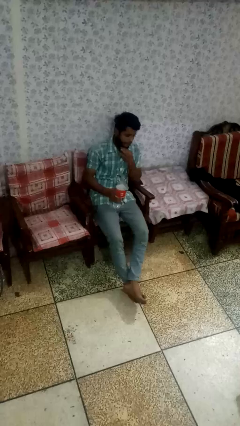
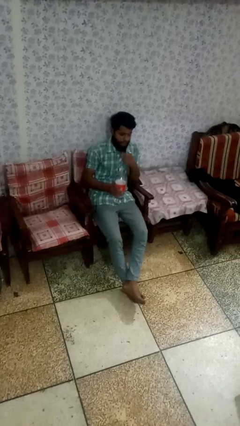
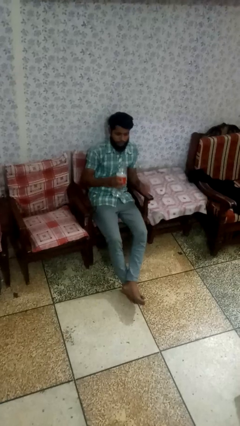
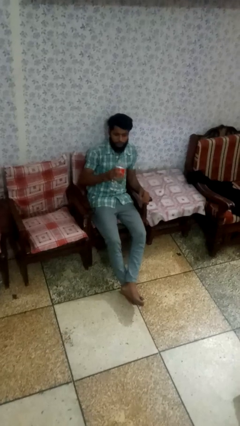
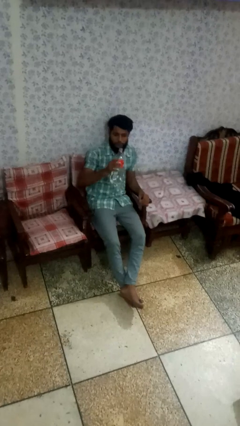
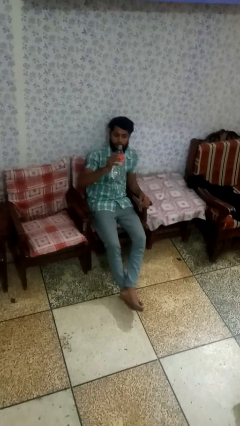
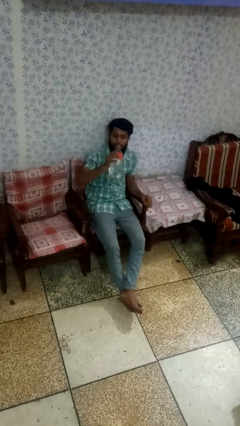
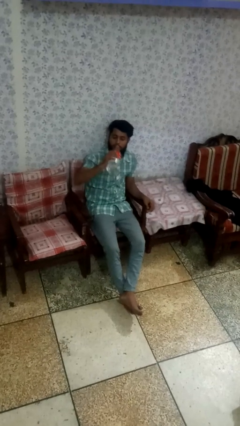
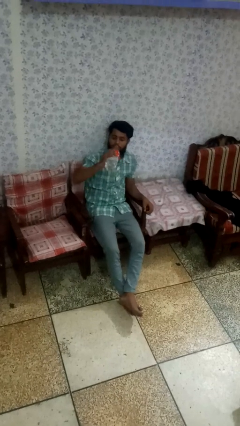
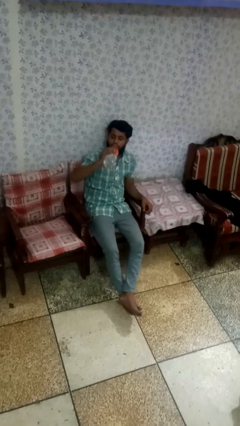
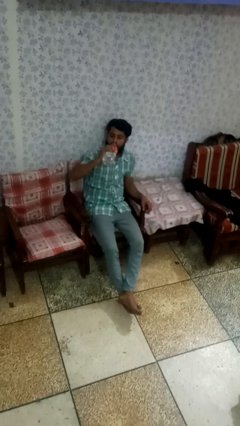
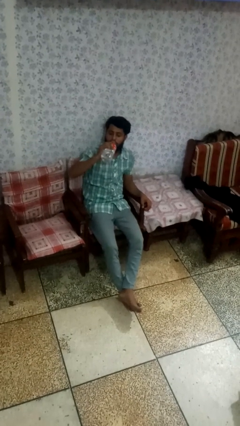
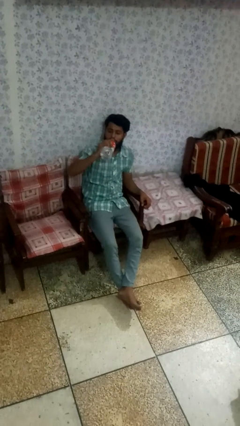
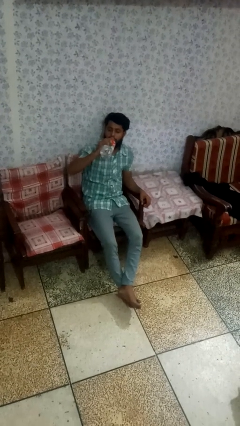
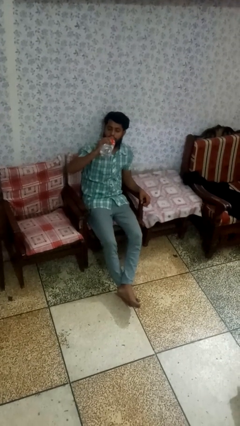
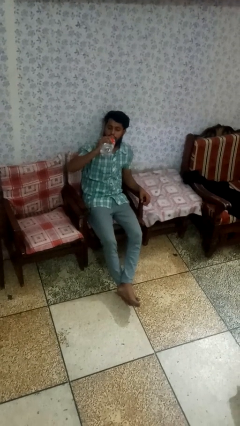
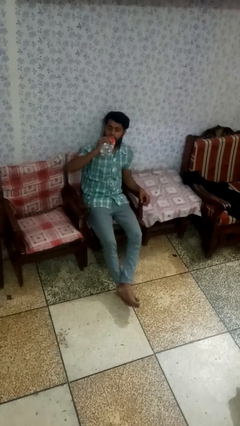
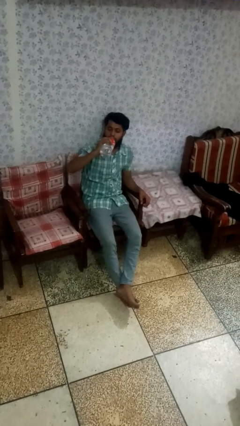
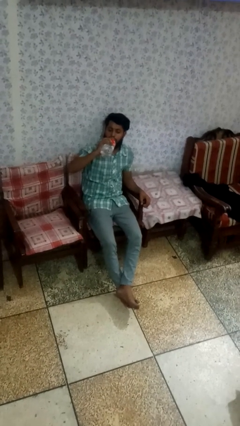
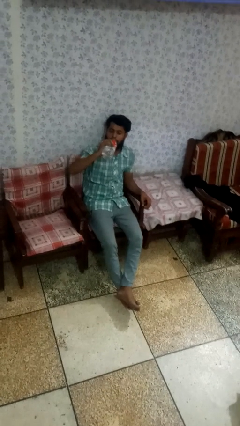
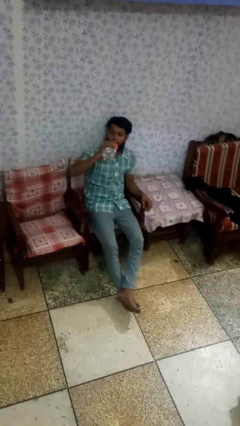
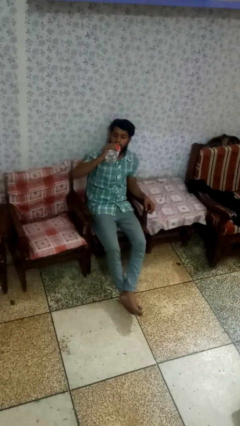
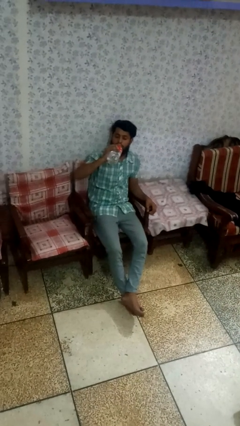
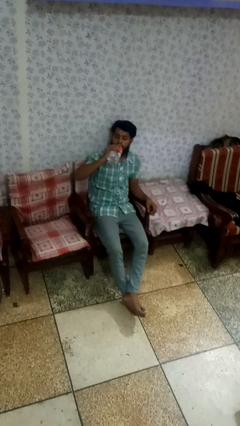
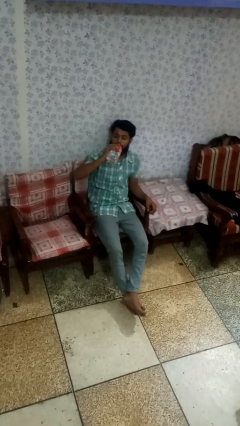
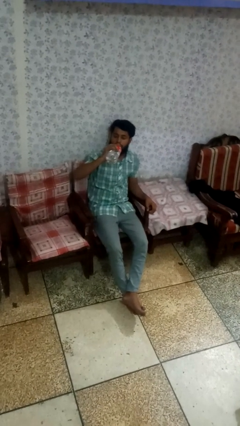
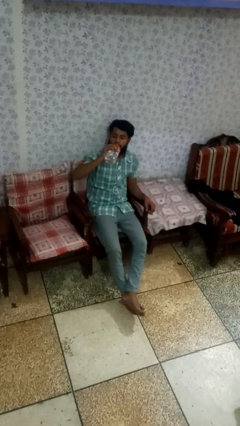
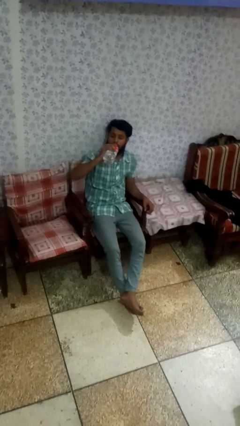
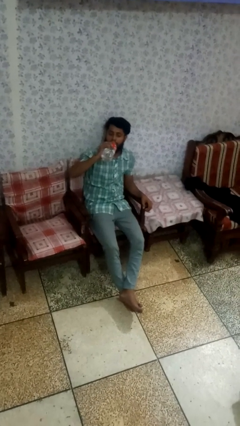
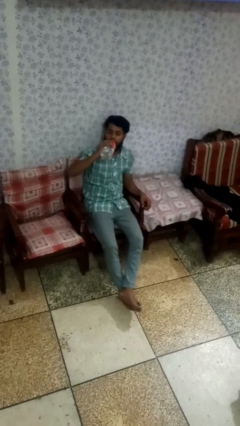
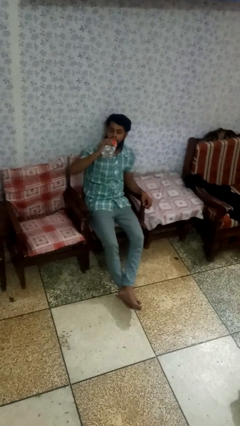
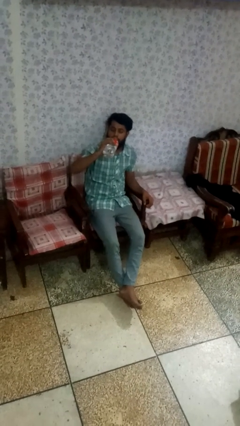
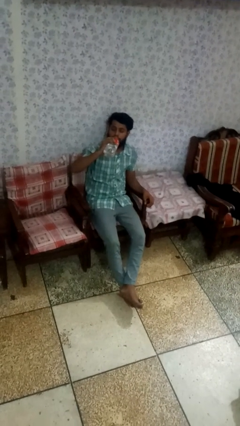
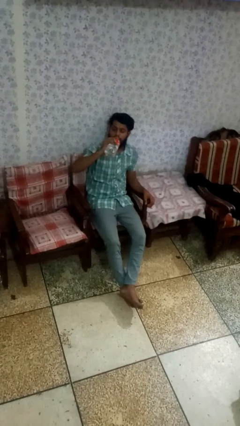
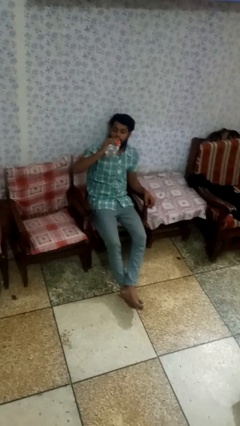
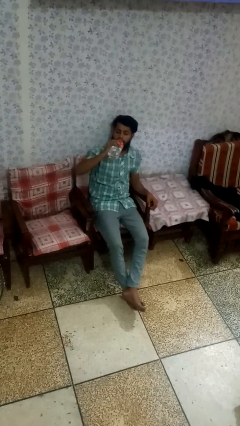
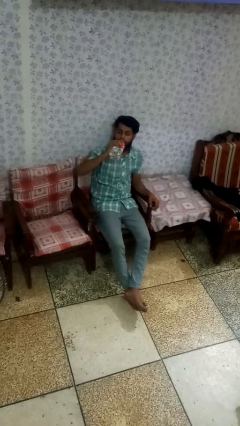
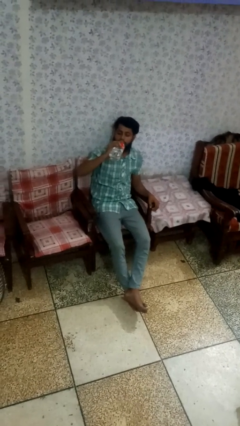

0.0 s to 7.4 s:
person drinks from bottle

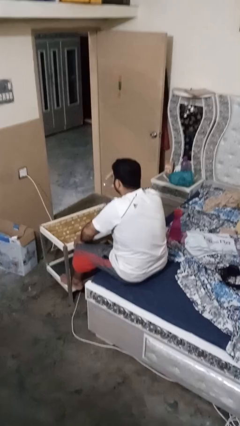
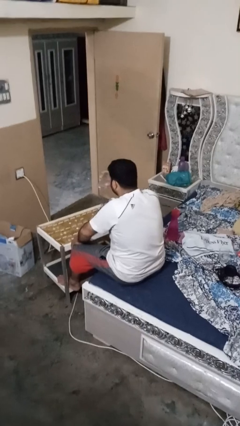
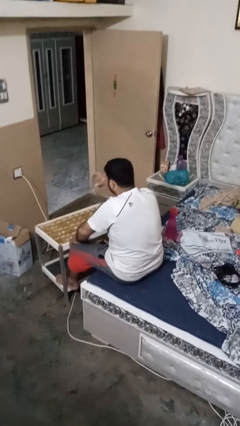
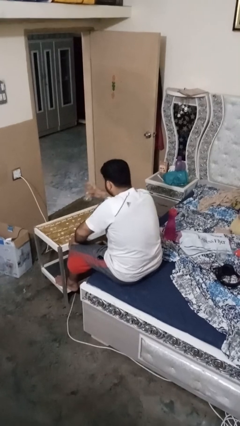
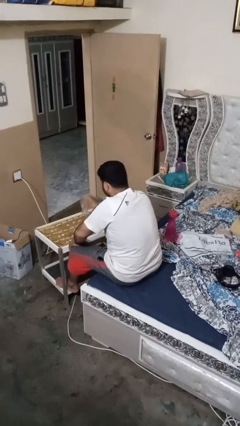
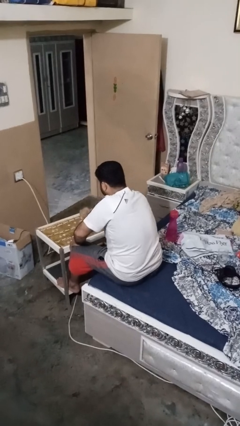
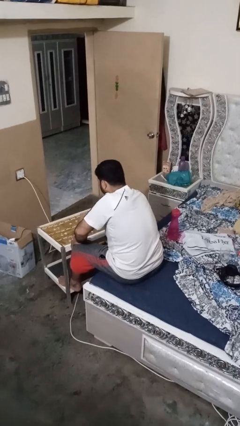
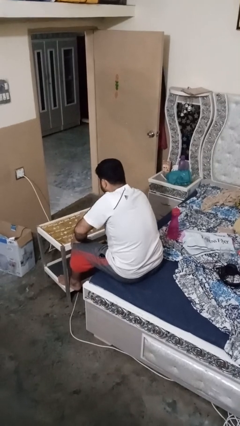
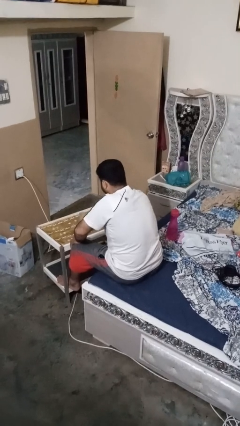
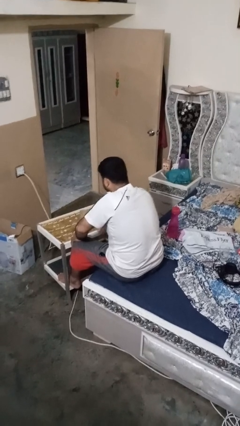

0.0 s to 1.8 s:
person puts down object on table

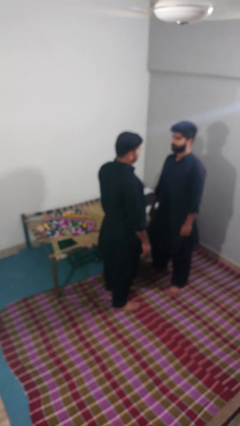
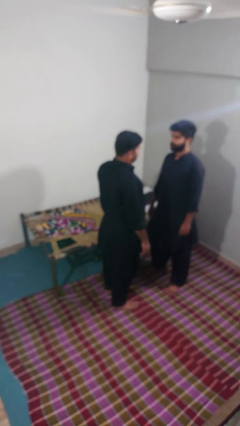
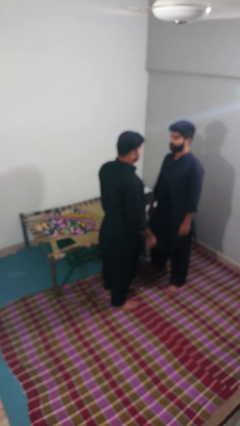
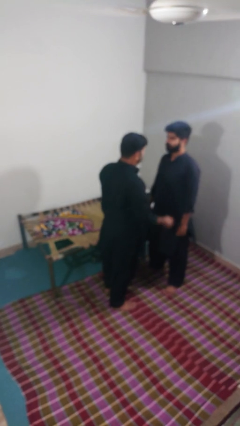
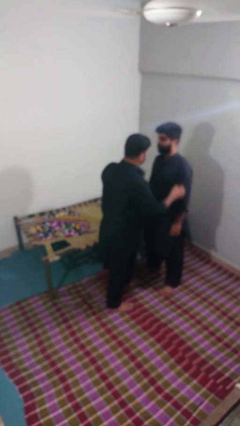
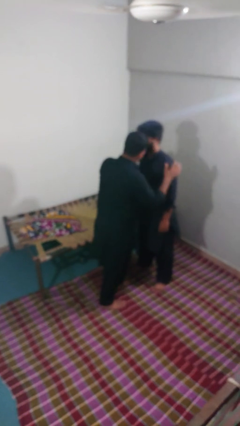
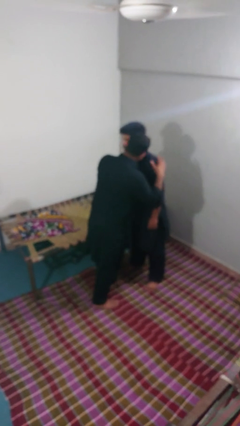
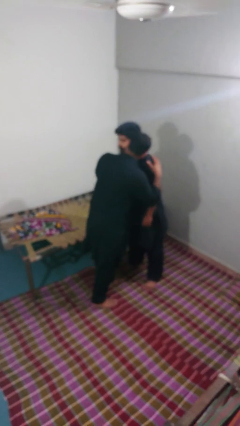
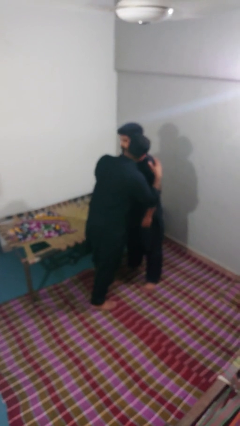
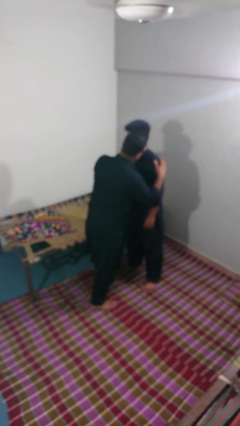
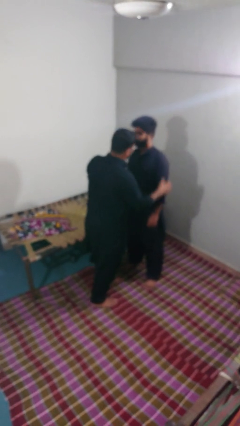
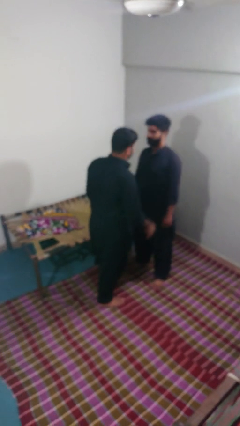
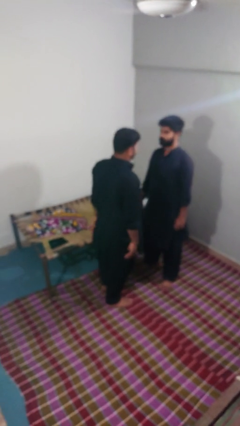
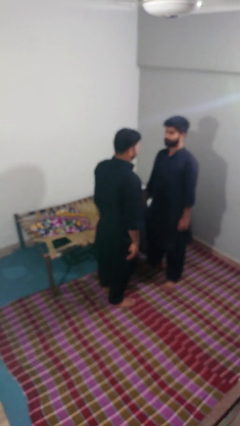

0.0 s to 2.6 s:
person kisses cheek of person

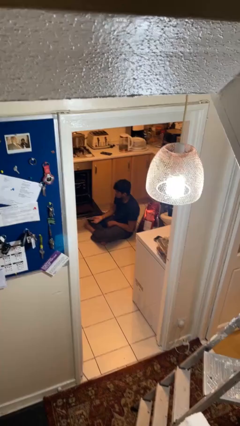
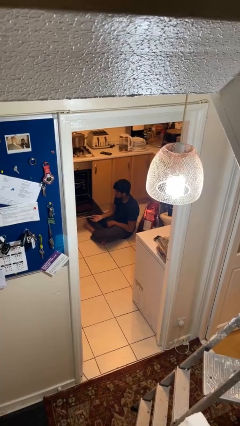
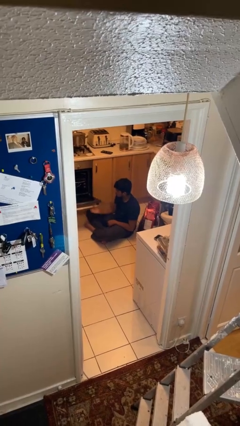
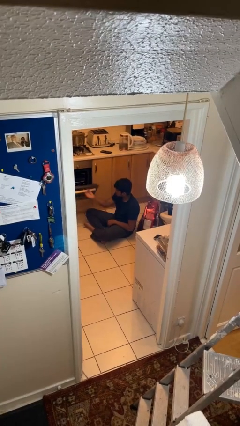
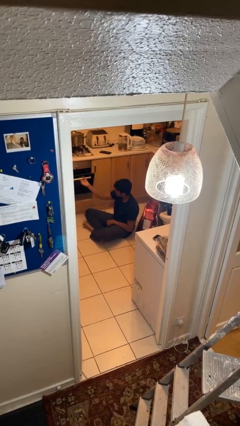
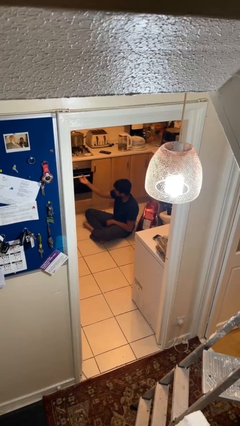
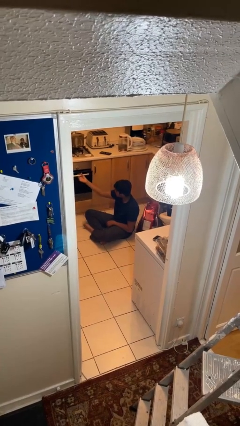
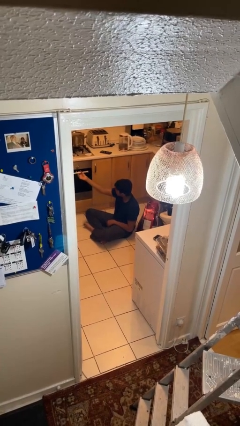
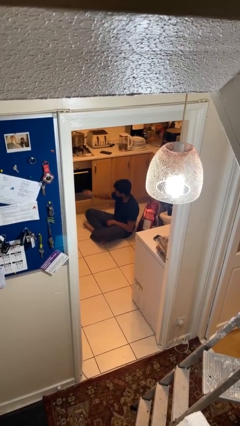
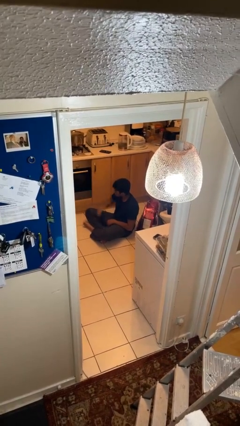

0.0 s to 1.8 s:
person closes oven door

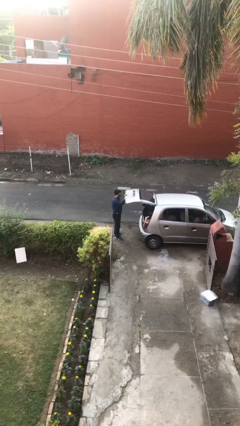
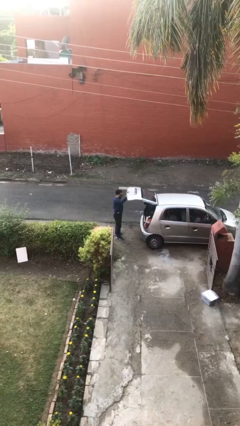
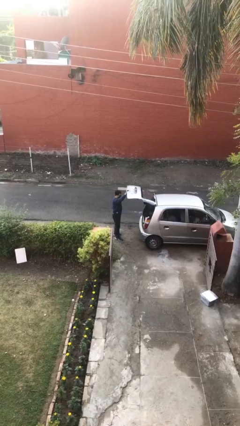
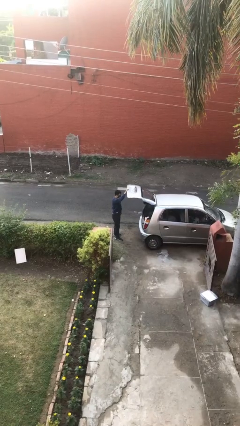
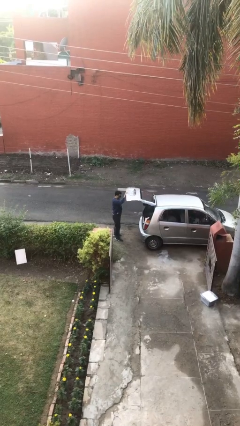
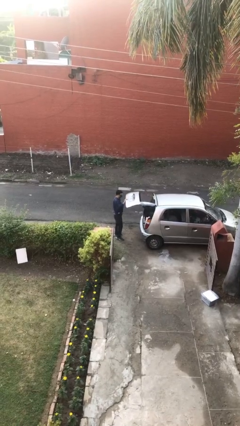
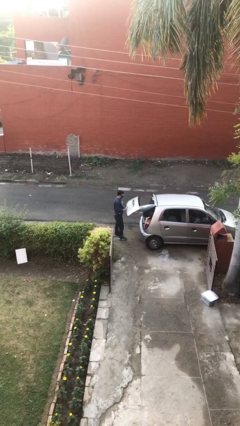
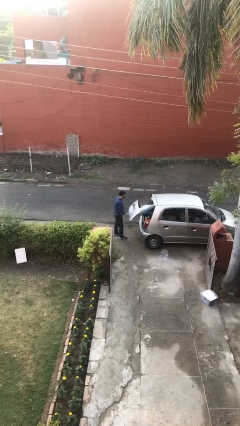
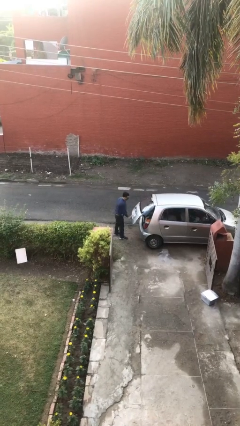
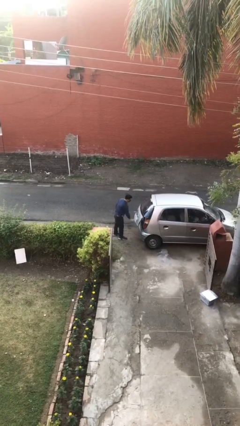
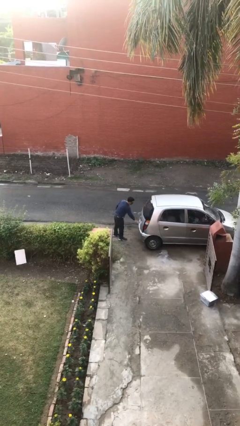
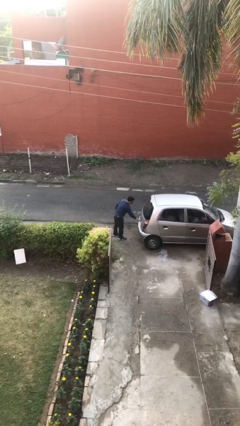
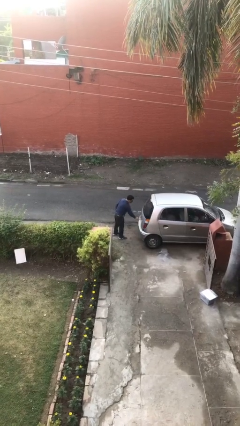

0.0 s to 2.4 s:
person closes car trunk

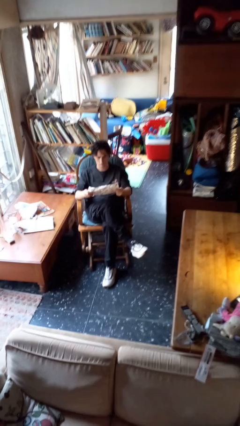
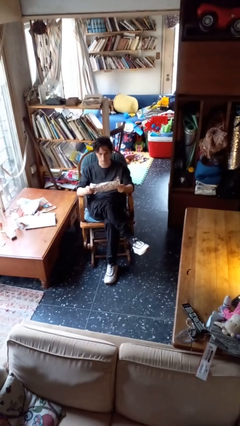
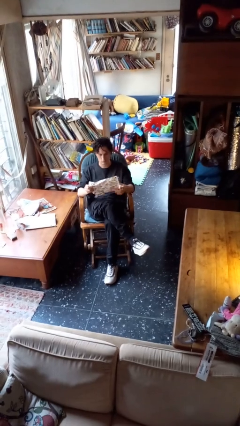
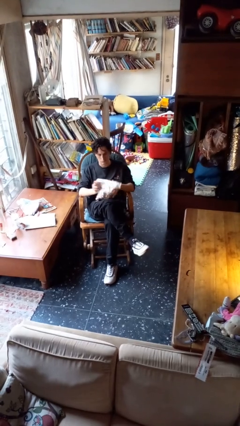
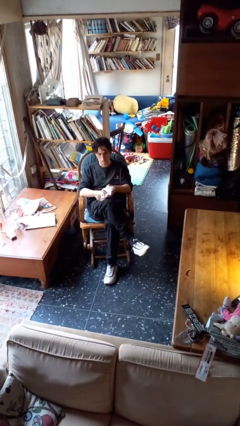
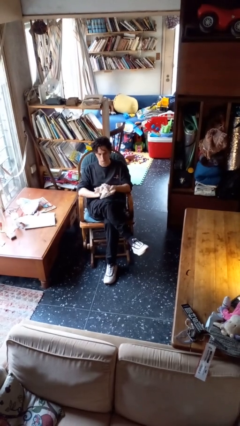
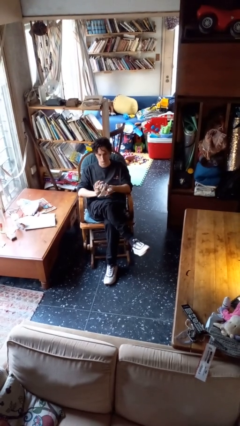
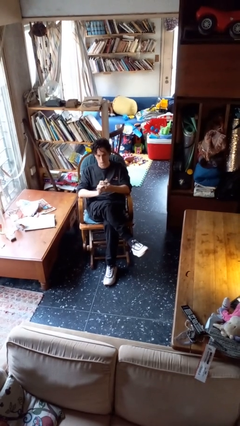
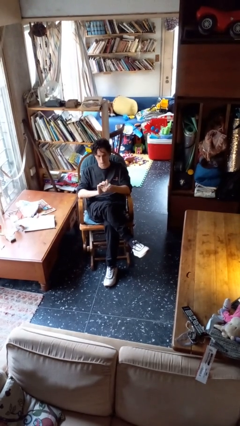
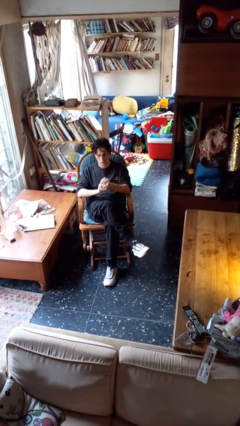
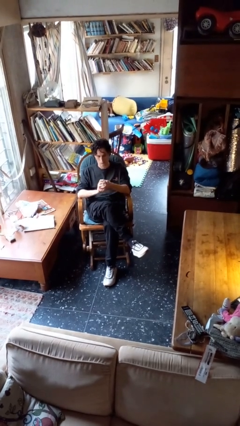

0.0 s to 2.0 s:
person crumples paper
